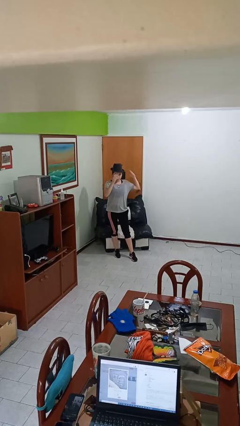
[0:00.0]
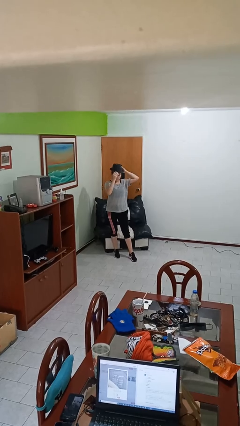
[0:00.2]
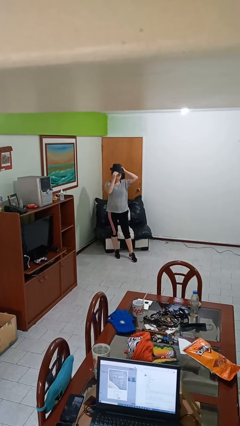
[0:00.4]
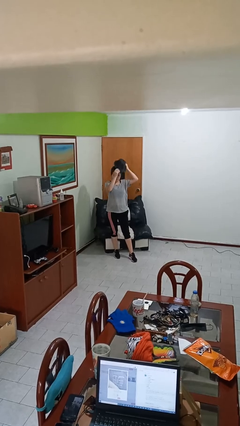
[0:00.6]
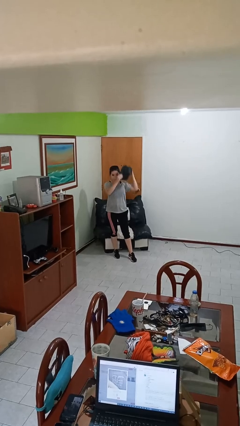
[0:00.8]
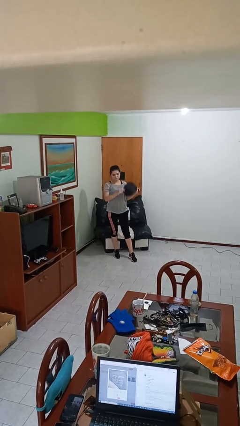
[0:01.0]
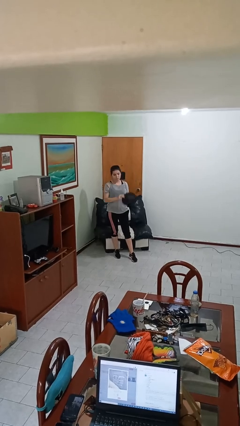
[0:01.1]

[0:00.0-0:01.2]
person takes off hat

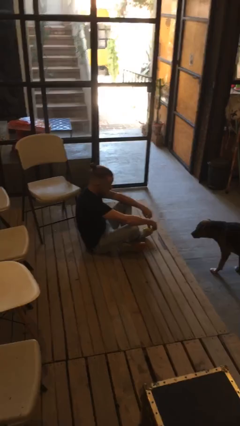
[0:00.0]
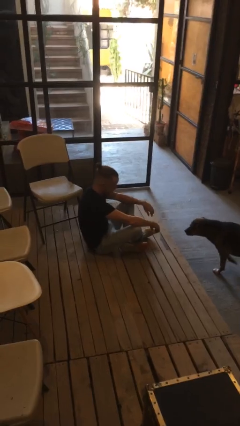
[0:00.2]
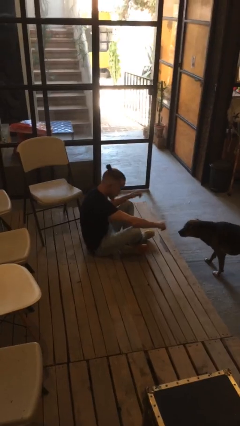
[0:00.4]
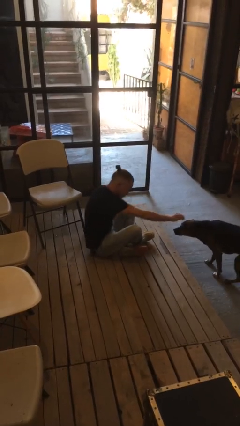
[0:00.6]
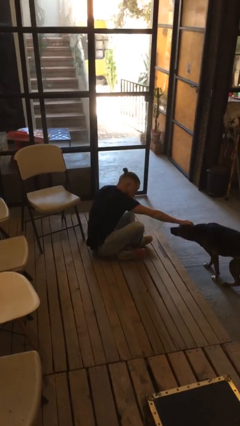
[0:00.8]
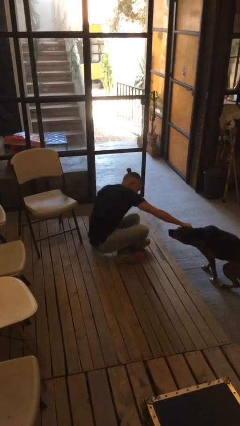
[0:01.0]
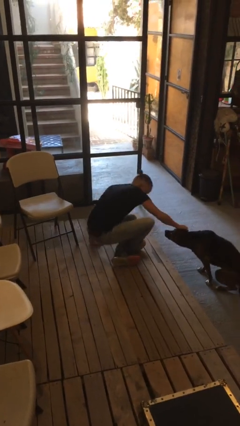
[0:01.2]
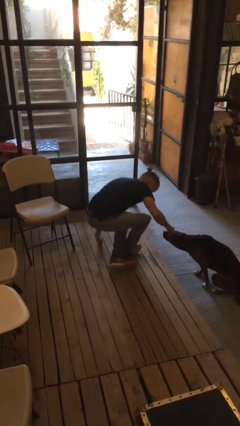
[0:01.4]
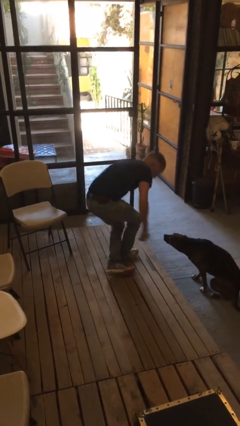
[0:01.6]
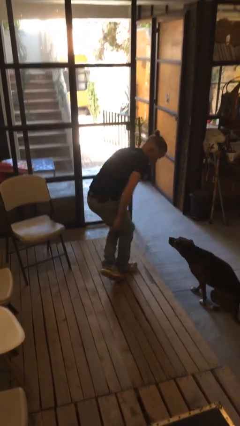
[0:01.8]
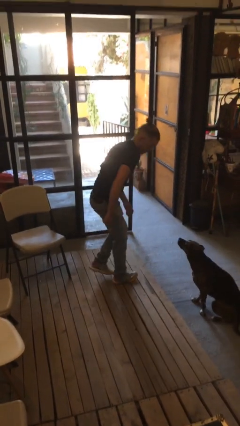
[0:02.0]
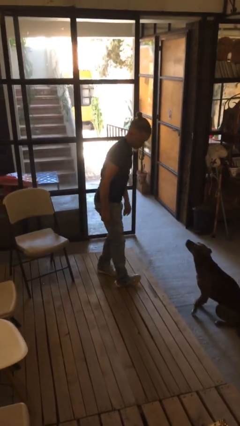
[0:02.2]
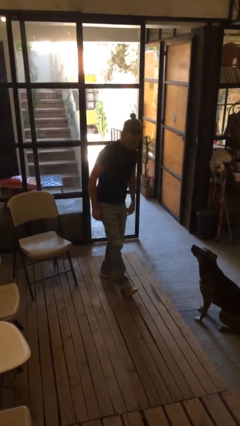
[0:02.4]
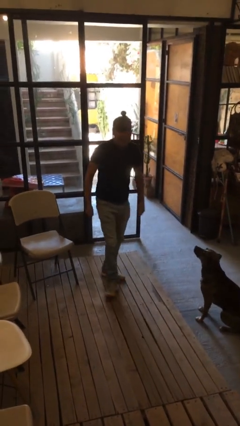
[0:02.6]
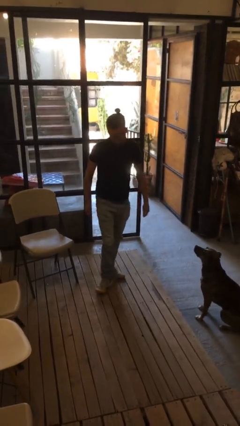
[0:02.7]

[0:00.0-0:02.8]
person stands up from floor

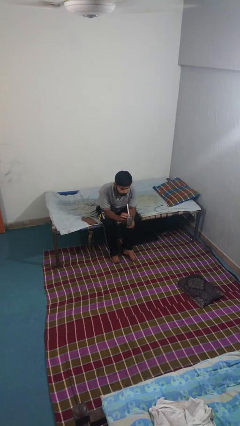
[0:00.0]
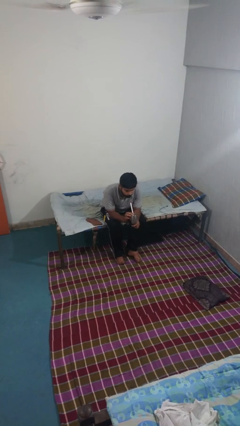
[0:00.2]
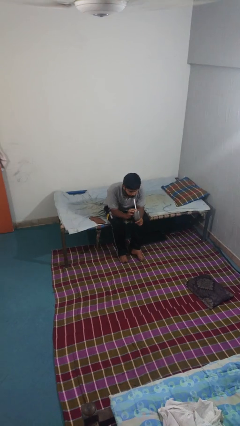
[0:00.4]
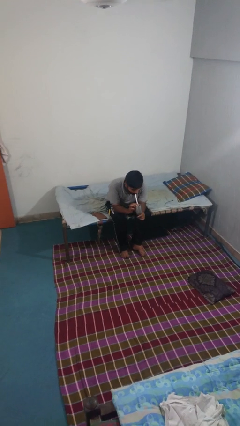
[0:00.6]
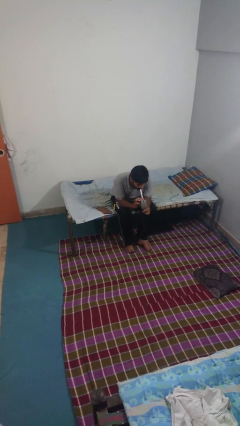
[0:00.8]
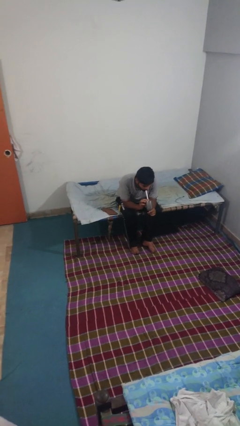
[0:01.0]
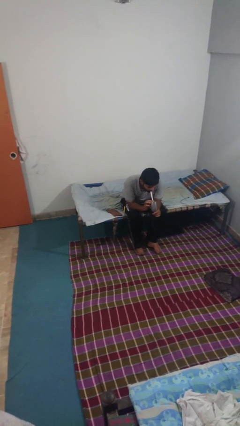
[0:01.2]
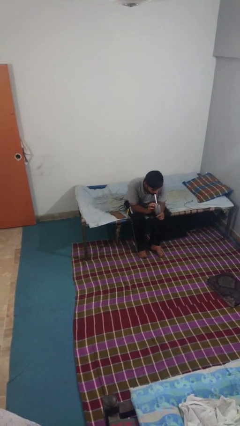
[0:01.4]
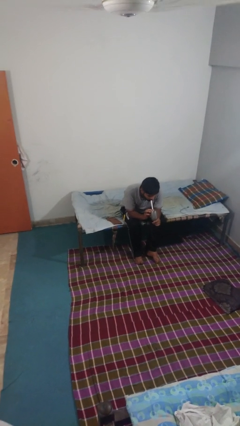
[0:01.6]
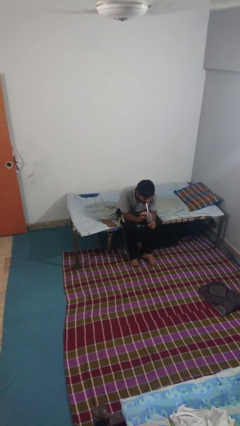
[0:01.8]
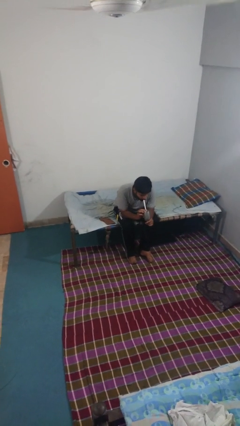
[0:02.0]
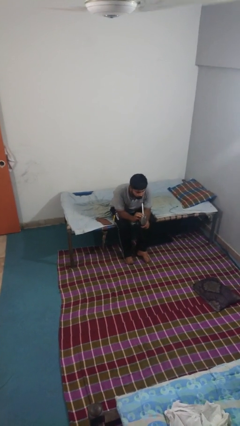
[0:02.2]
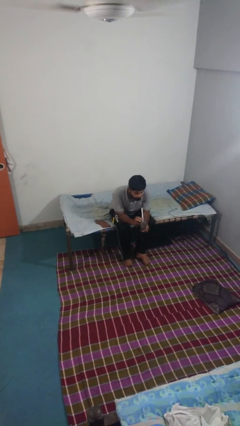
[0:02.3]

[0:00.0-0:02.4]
person drinks from straw

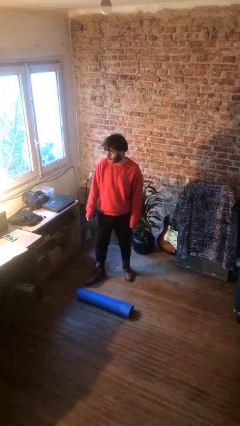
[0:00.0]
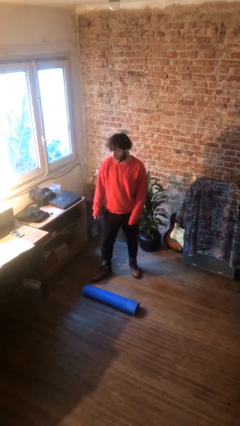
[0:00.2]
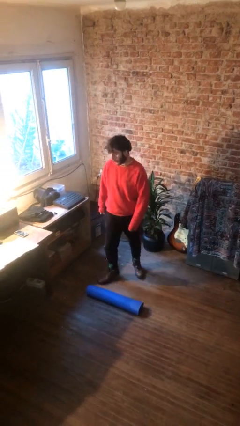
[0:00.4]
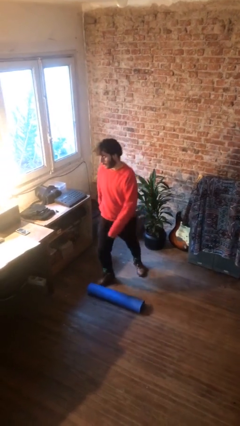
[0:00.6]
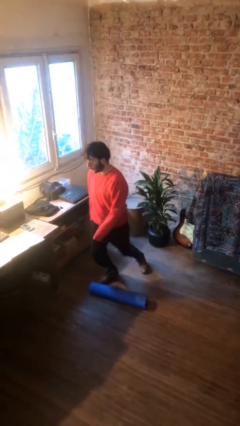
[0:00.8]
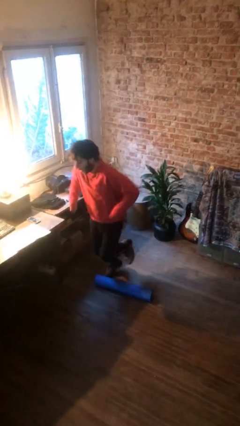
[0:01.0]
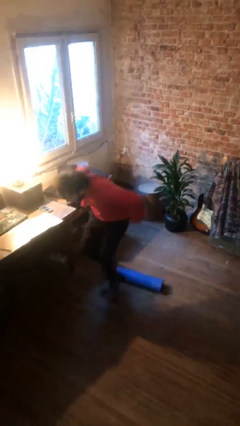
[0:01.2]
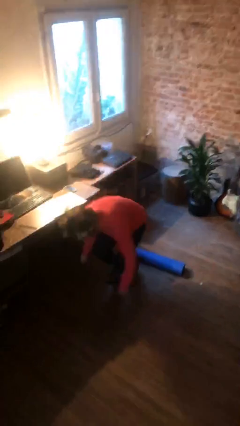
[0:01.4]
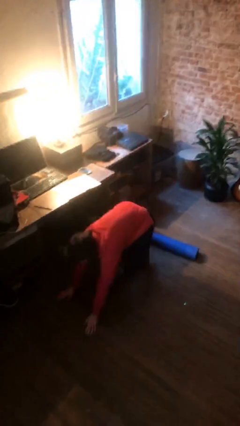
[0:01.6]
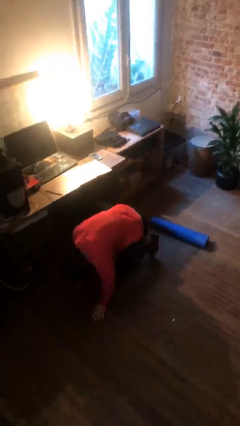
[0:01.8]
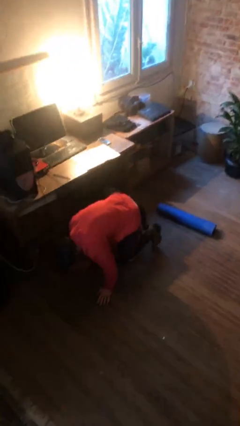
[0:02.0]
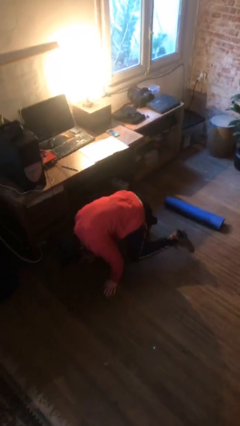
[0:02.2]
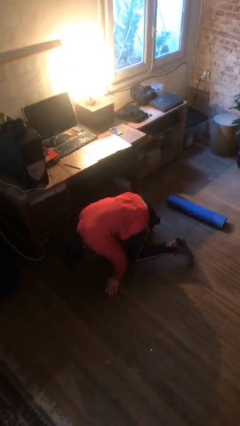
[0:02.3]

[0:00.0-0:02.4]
person trips on object on floor

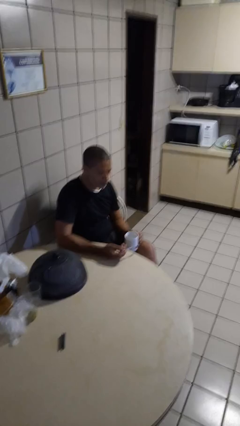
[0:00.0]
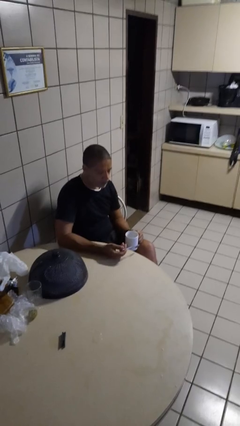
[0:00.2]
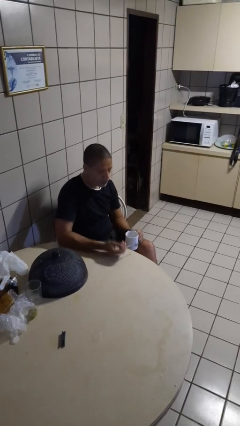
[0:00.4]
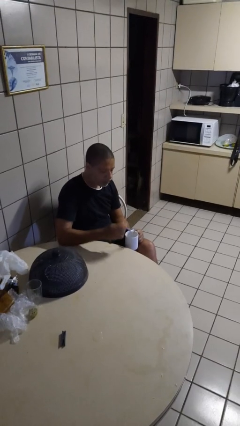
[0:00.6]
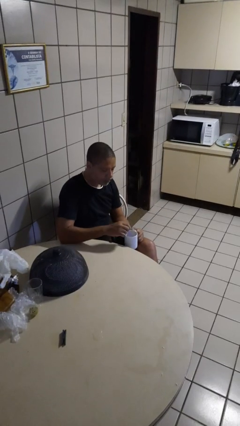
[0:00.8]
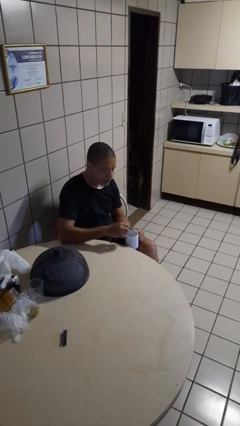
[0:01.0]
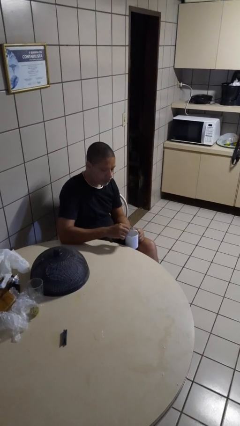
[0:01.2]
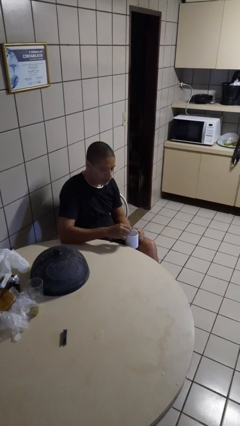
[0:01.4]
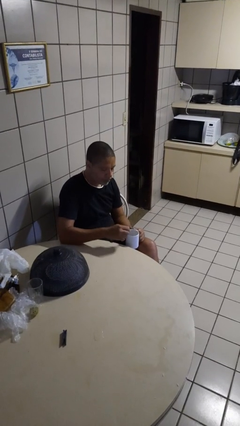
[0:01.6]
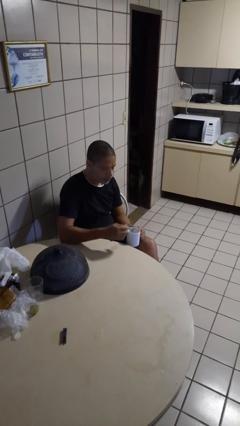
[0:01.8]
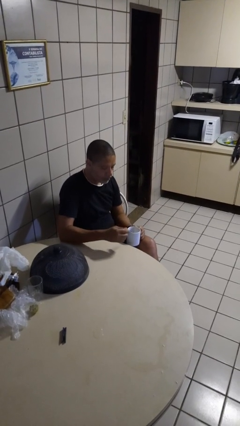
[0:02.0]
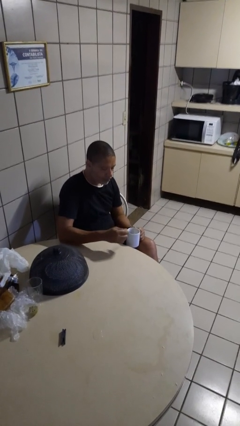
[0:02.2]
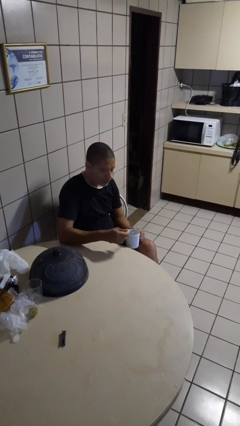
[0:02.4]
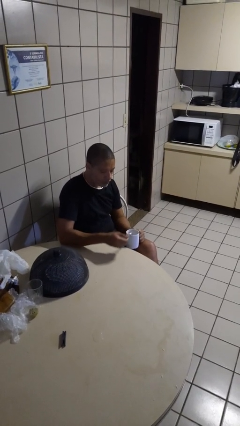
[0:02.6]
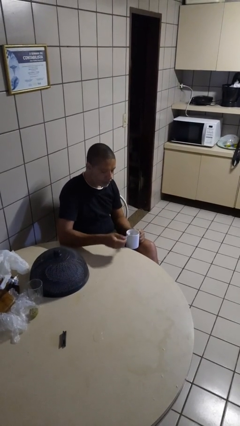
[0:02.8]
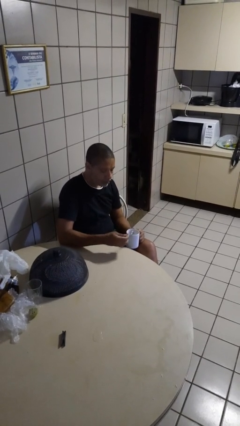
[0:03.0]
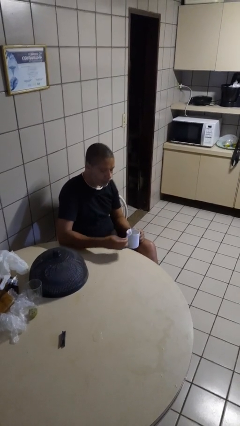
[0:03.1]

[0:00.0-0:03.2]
person stirs mug

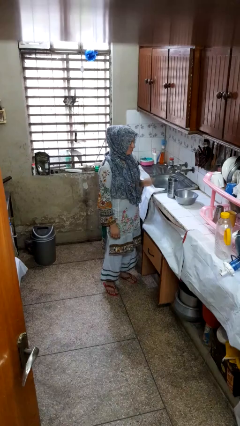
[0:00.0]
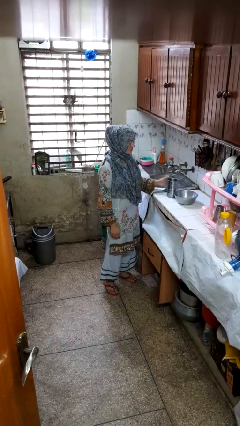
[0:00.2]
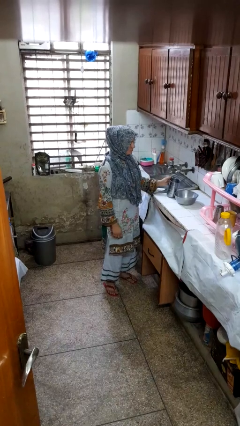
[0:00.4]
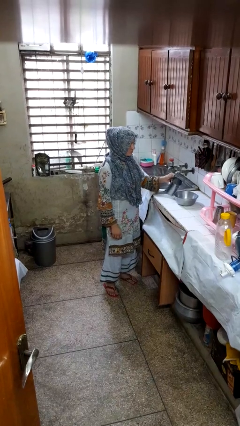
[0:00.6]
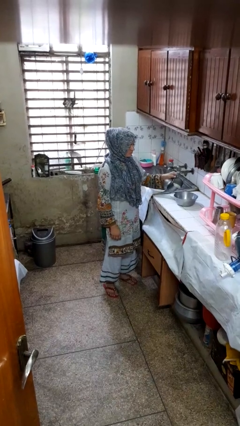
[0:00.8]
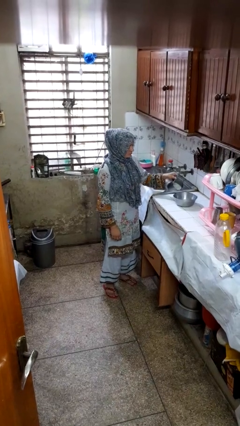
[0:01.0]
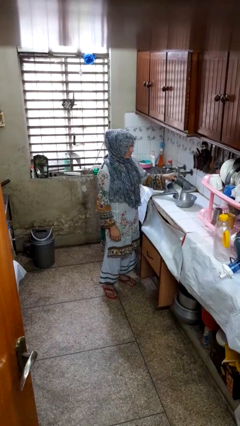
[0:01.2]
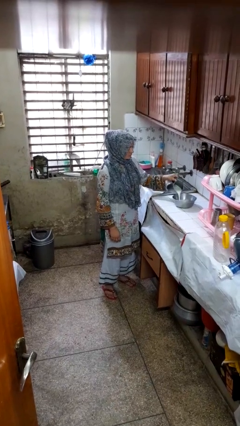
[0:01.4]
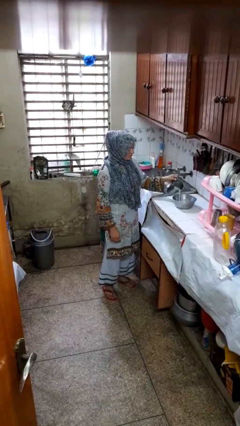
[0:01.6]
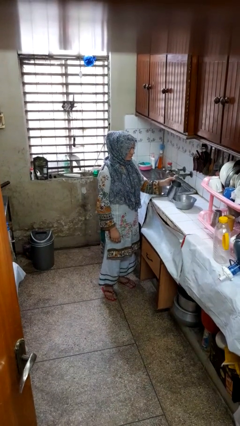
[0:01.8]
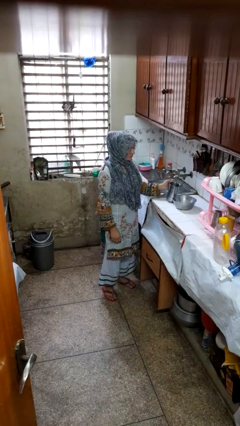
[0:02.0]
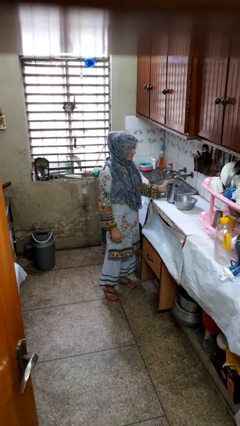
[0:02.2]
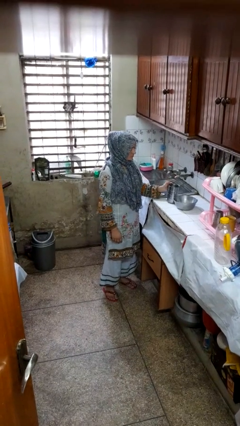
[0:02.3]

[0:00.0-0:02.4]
person pours into bowl

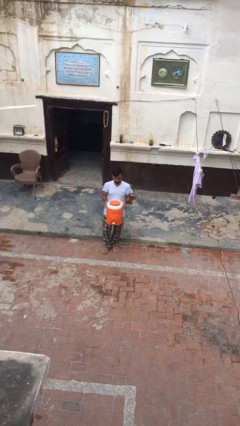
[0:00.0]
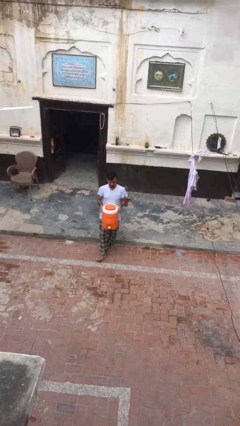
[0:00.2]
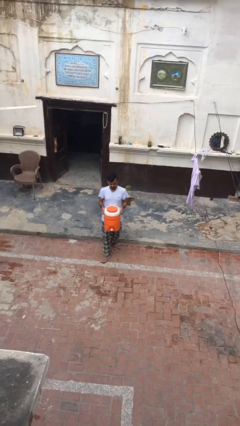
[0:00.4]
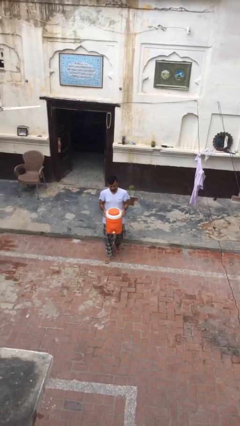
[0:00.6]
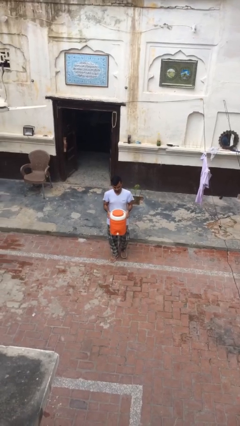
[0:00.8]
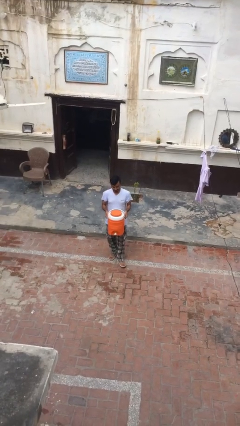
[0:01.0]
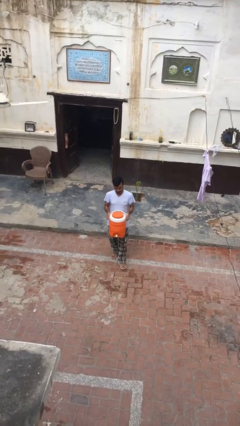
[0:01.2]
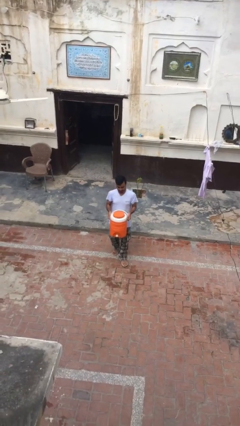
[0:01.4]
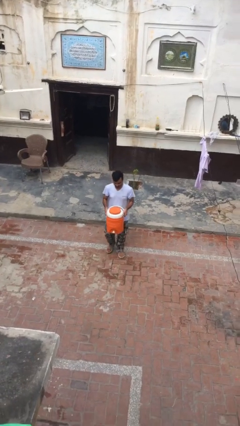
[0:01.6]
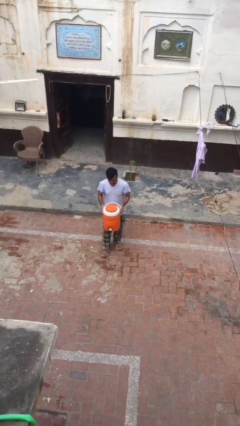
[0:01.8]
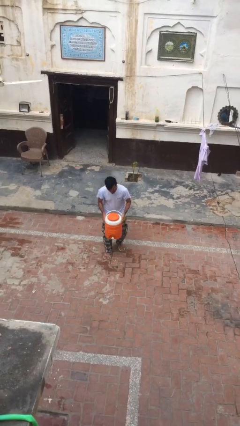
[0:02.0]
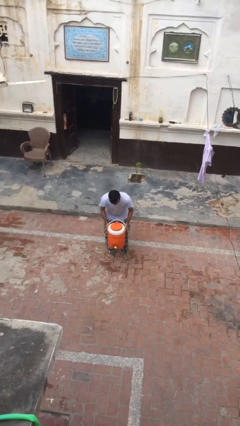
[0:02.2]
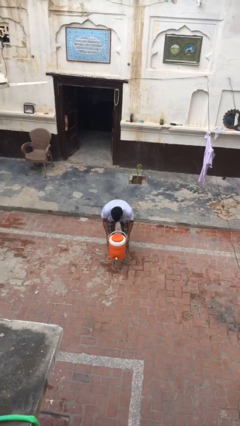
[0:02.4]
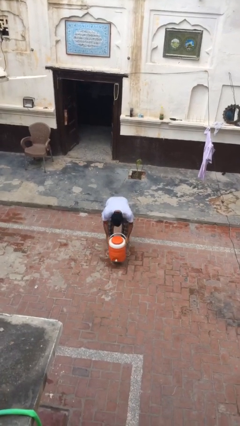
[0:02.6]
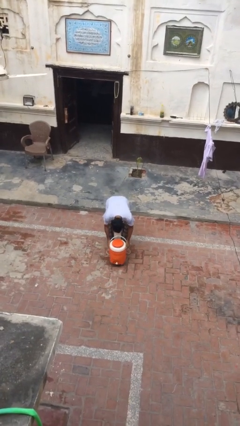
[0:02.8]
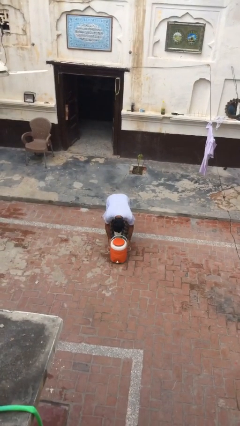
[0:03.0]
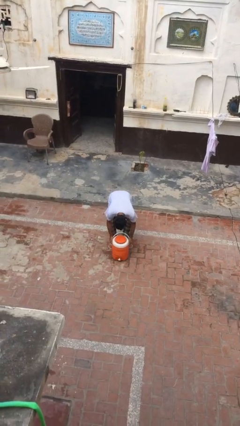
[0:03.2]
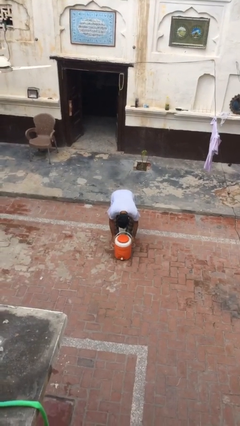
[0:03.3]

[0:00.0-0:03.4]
person puts down object on floor
